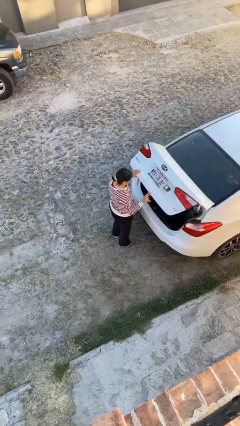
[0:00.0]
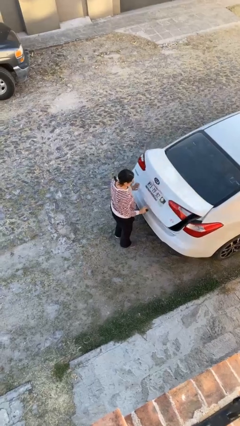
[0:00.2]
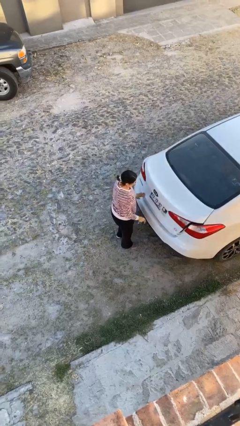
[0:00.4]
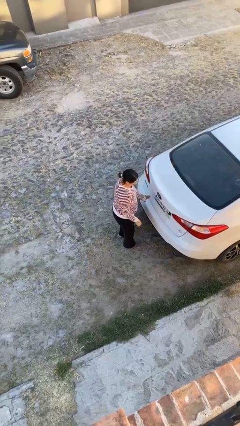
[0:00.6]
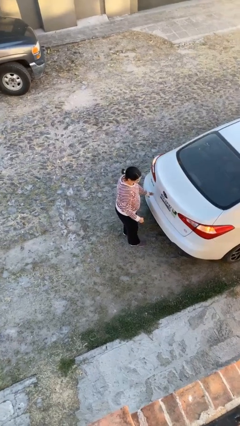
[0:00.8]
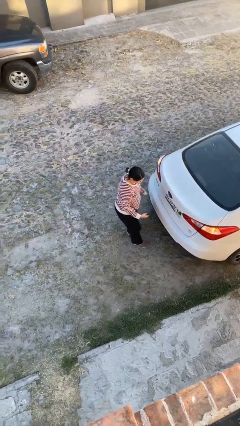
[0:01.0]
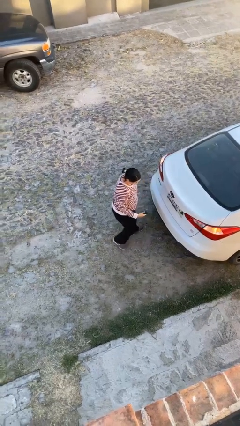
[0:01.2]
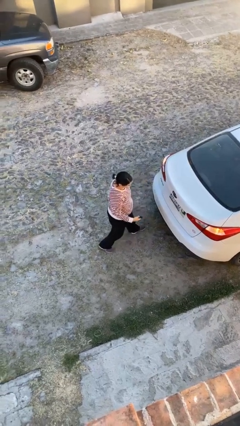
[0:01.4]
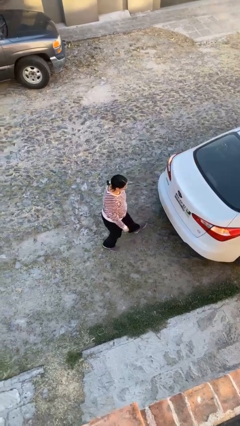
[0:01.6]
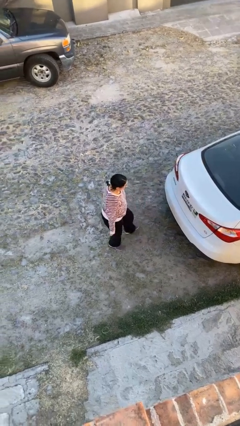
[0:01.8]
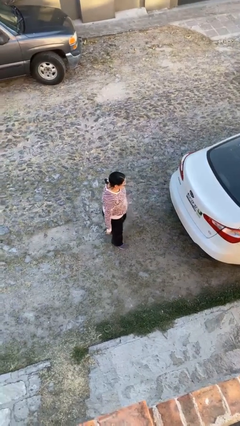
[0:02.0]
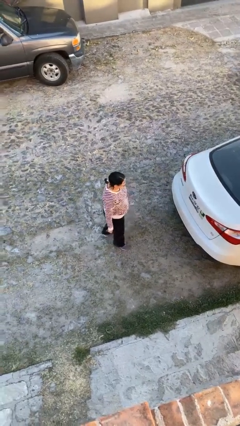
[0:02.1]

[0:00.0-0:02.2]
person closes car trunk

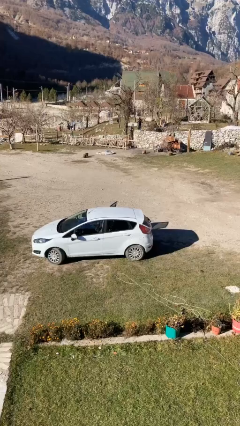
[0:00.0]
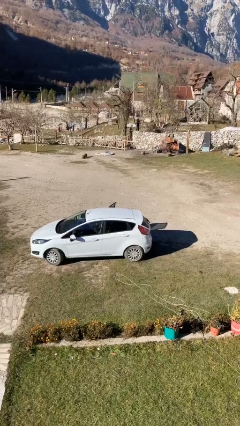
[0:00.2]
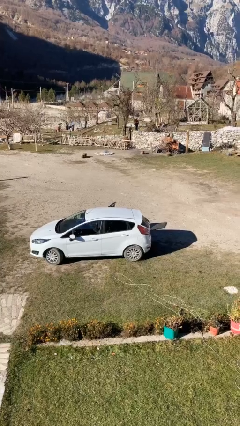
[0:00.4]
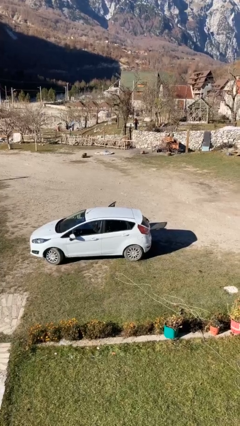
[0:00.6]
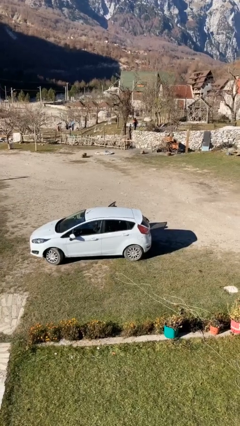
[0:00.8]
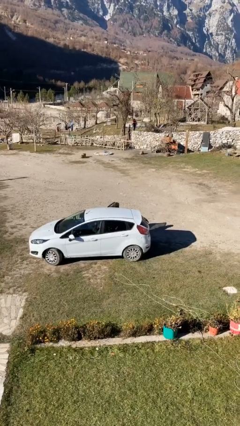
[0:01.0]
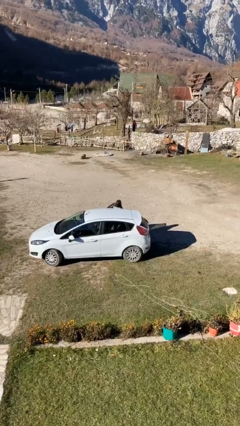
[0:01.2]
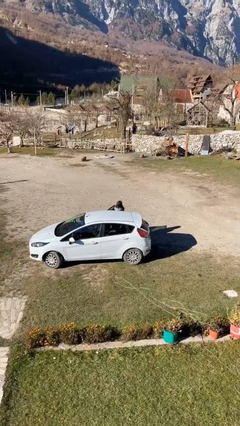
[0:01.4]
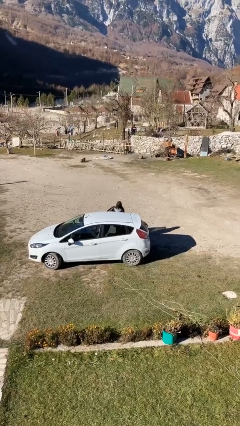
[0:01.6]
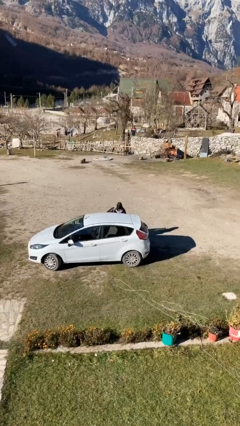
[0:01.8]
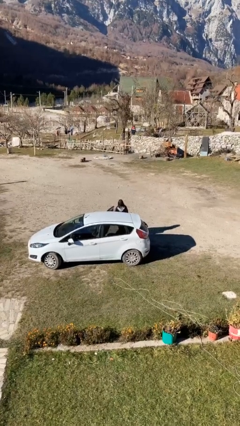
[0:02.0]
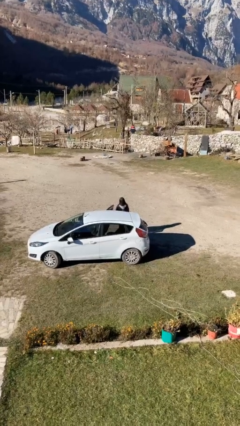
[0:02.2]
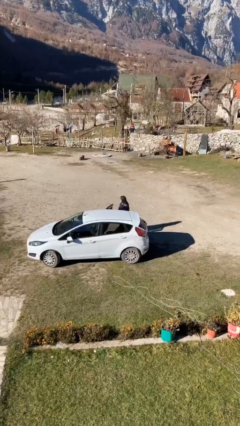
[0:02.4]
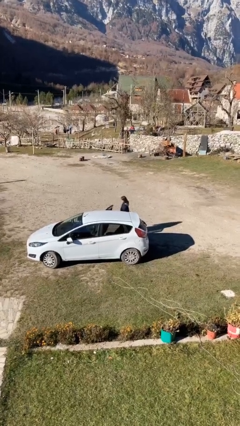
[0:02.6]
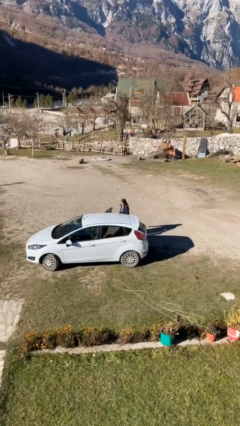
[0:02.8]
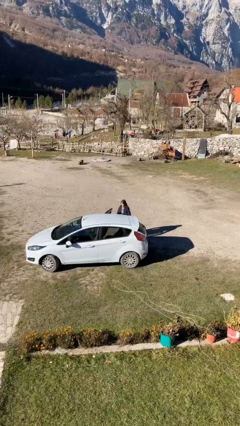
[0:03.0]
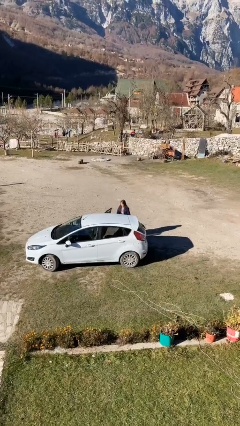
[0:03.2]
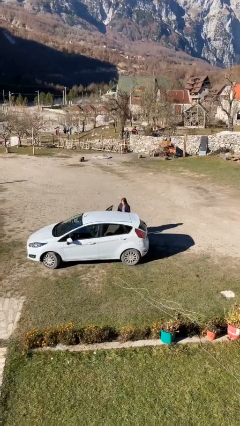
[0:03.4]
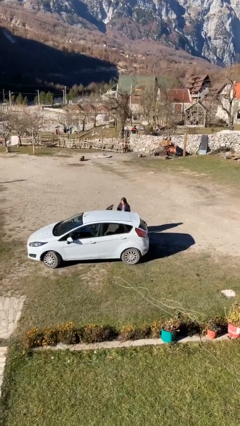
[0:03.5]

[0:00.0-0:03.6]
person exits car

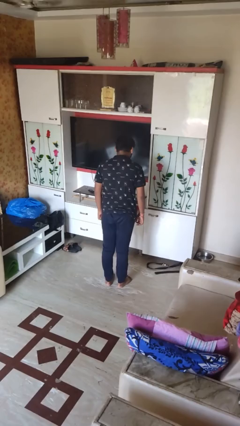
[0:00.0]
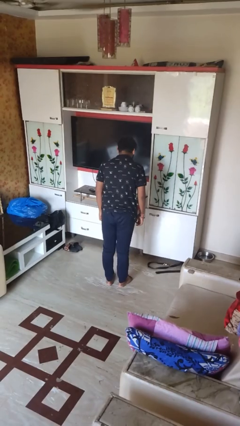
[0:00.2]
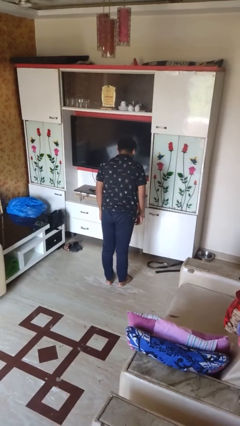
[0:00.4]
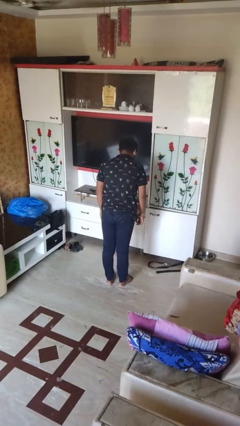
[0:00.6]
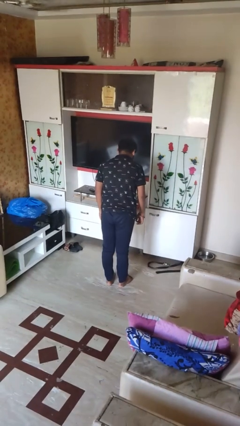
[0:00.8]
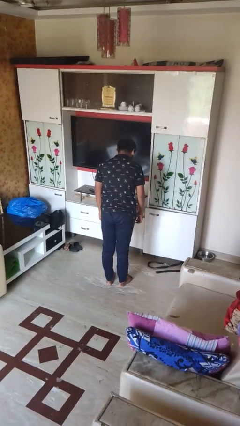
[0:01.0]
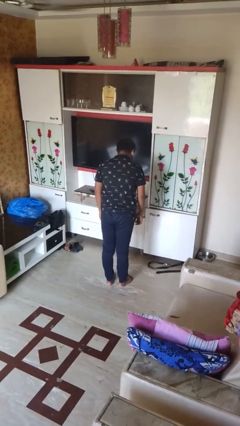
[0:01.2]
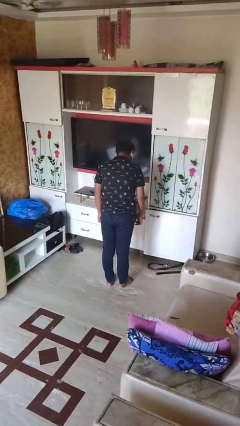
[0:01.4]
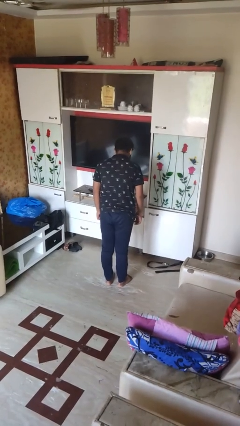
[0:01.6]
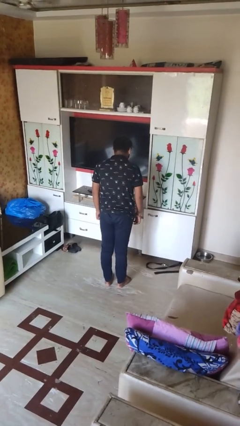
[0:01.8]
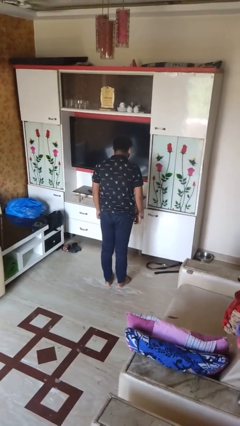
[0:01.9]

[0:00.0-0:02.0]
person wiggles hips

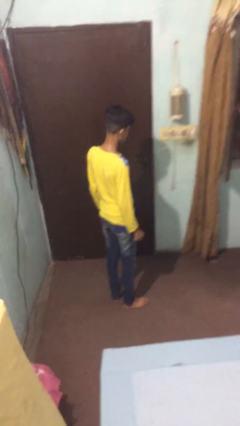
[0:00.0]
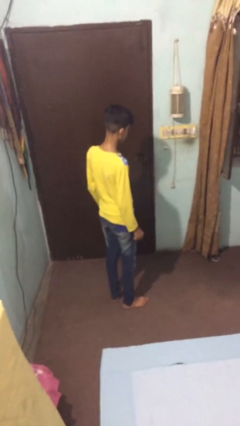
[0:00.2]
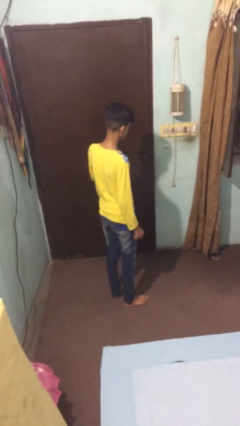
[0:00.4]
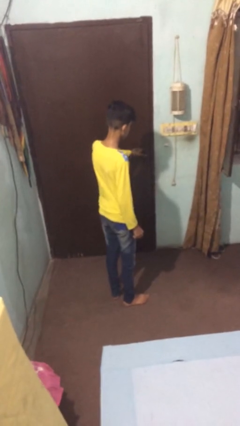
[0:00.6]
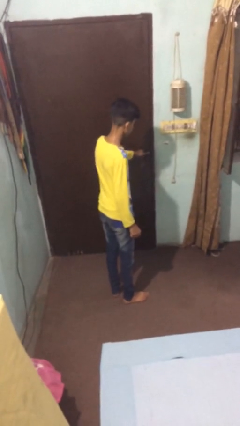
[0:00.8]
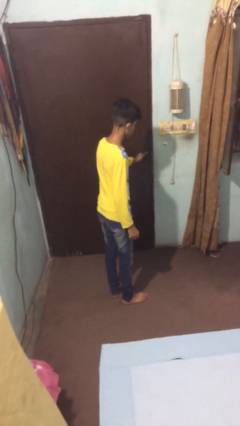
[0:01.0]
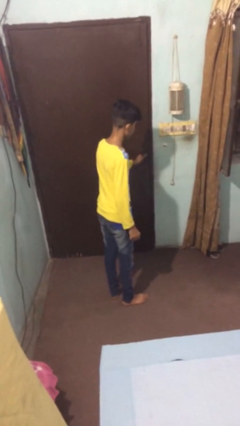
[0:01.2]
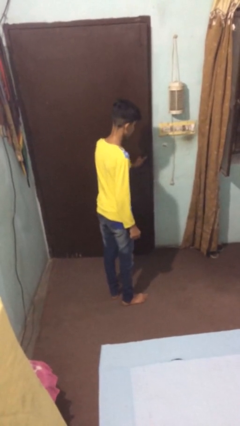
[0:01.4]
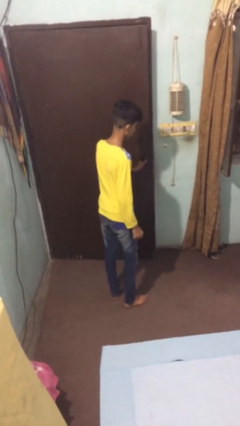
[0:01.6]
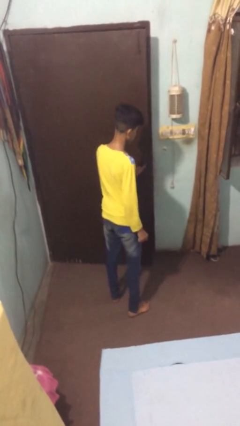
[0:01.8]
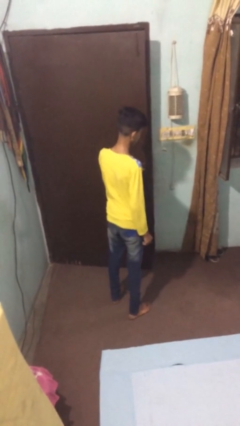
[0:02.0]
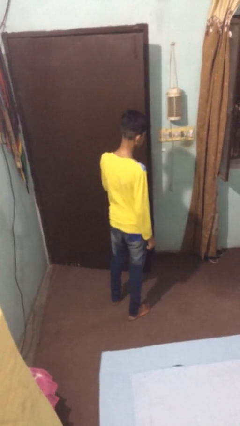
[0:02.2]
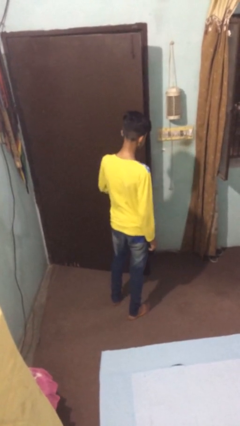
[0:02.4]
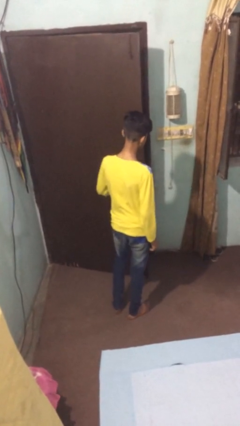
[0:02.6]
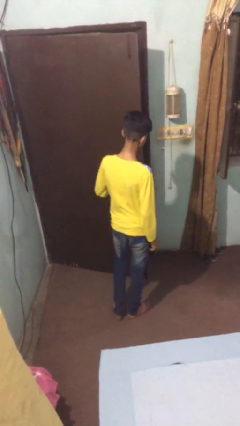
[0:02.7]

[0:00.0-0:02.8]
person opens facility door

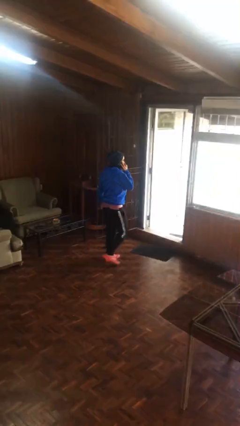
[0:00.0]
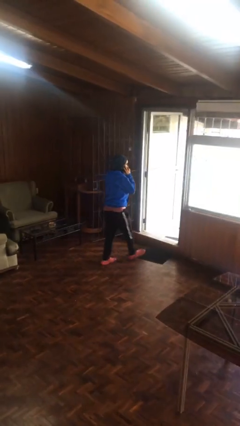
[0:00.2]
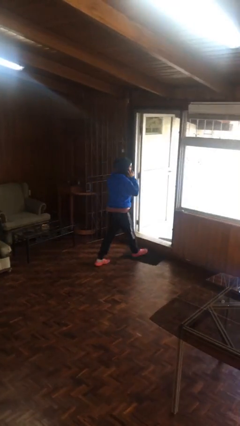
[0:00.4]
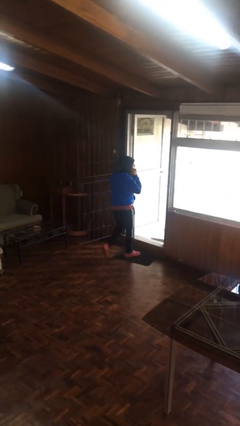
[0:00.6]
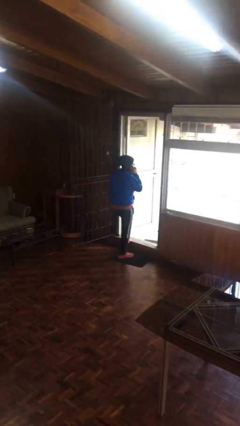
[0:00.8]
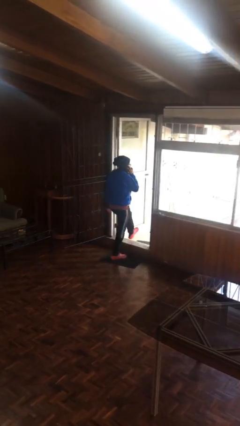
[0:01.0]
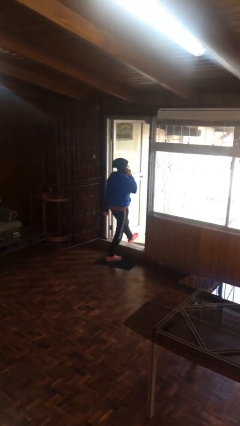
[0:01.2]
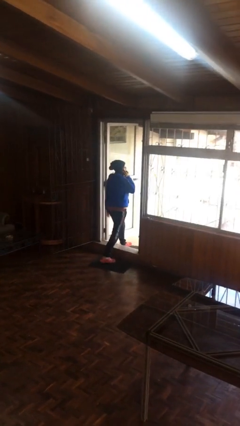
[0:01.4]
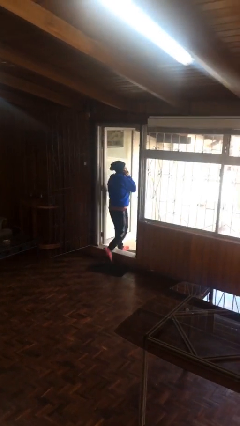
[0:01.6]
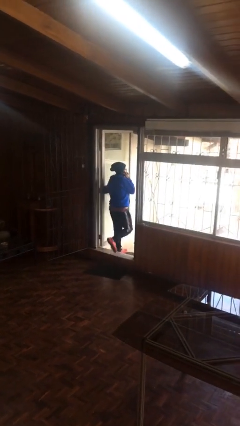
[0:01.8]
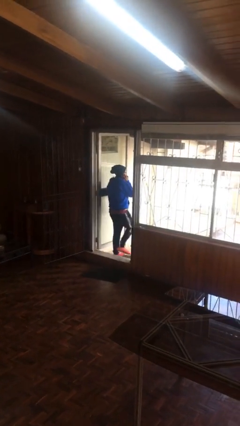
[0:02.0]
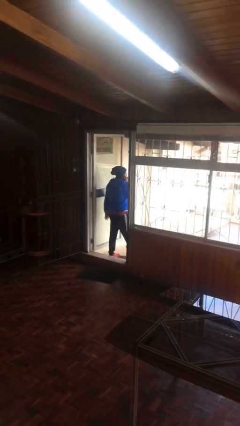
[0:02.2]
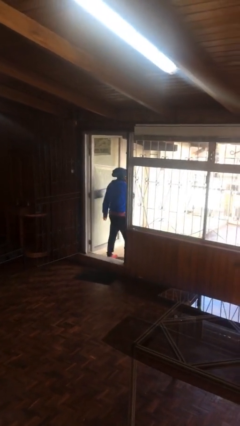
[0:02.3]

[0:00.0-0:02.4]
person exits scene through structure

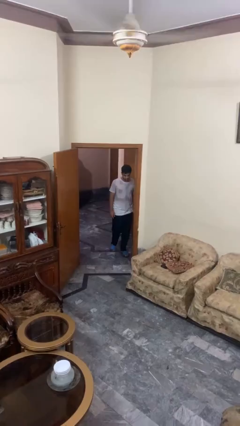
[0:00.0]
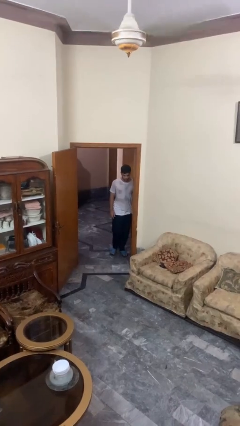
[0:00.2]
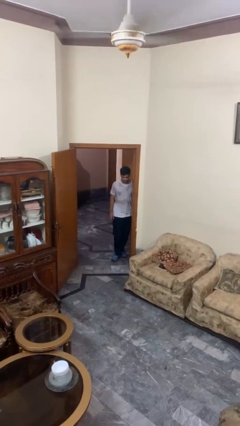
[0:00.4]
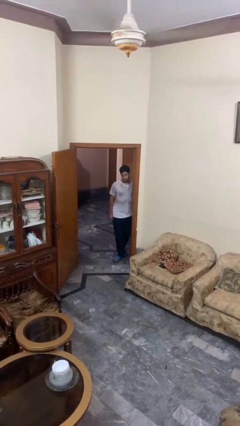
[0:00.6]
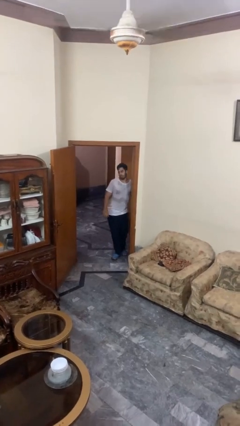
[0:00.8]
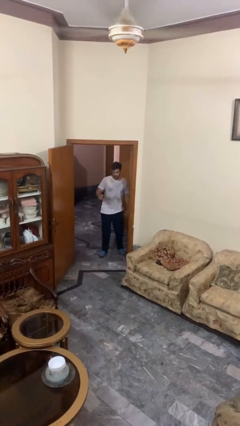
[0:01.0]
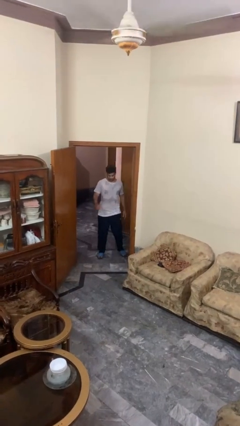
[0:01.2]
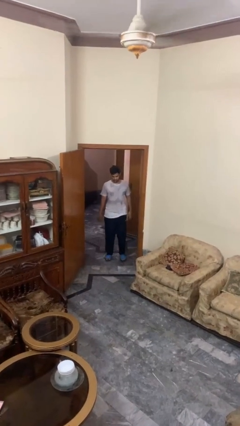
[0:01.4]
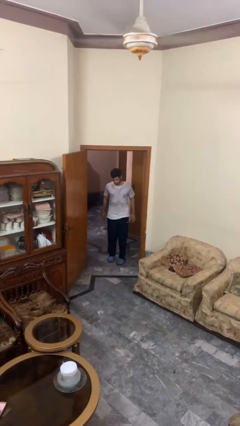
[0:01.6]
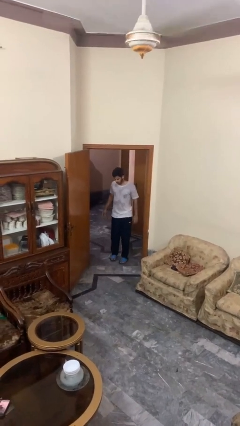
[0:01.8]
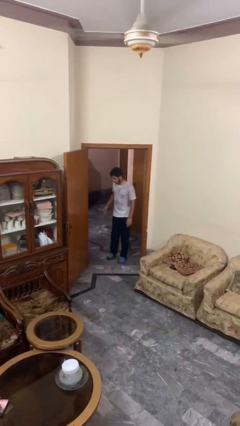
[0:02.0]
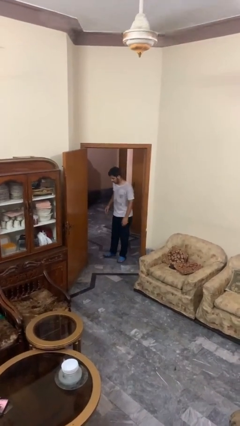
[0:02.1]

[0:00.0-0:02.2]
person bumps into wall

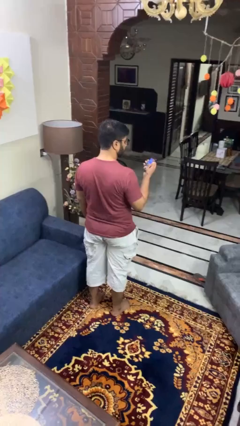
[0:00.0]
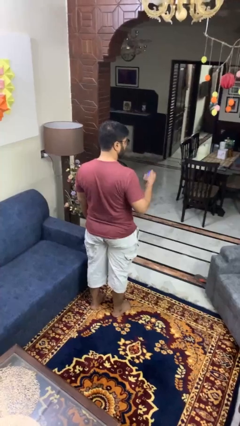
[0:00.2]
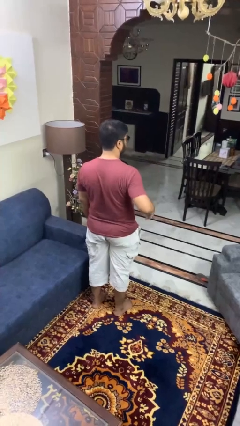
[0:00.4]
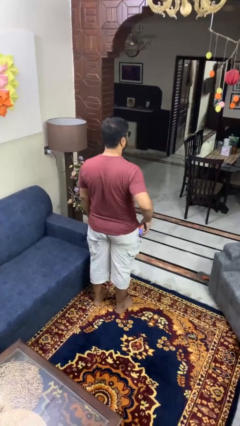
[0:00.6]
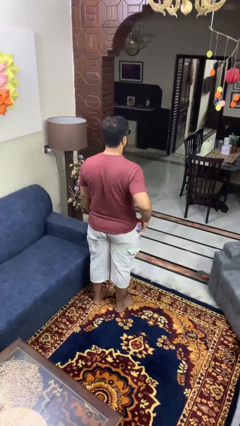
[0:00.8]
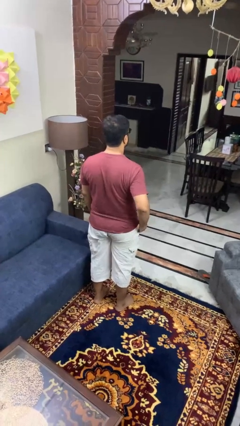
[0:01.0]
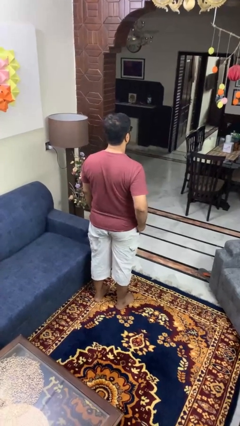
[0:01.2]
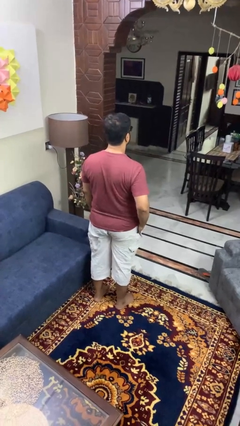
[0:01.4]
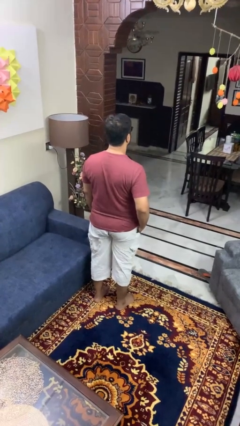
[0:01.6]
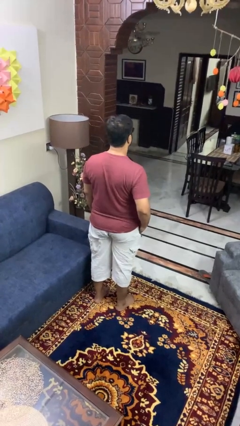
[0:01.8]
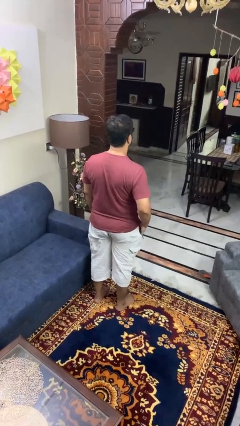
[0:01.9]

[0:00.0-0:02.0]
person puts phone into pocket
